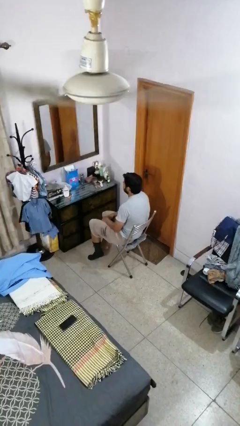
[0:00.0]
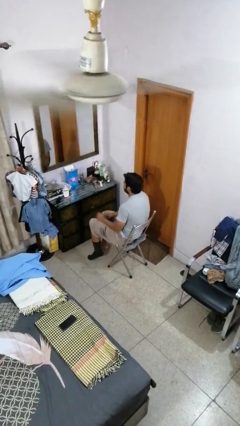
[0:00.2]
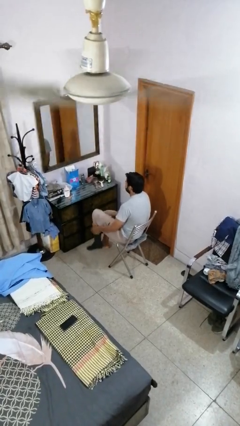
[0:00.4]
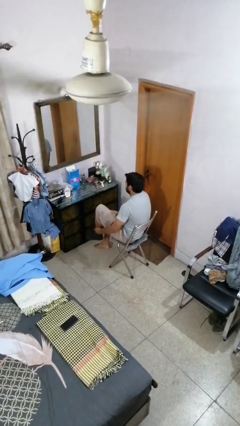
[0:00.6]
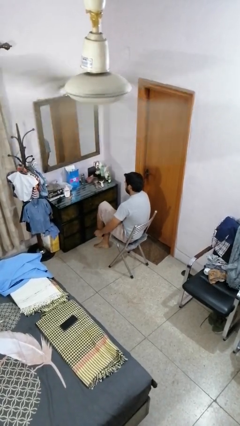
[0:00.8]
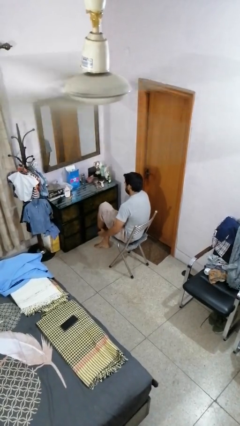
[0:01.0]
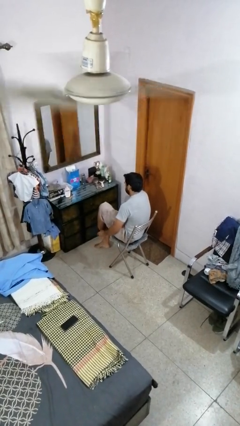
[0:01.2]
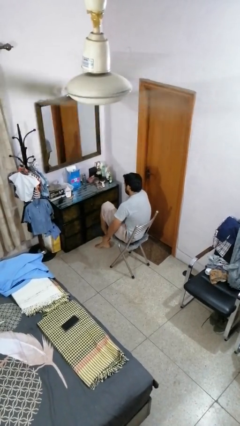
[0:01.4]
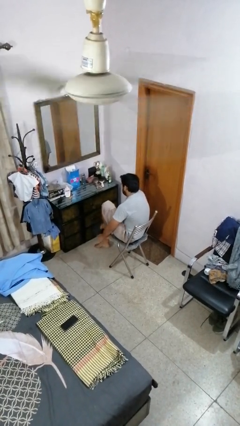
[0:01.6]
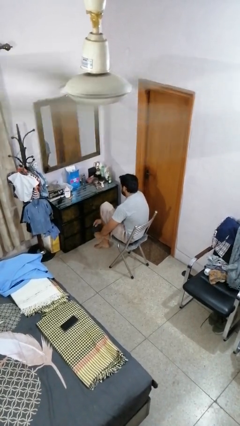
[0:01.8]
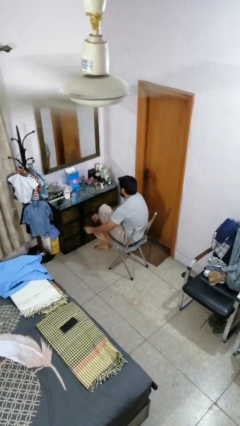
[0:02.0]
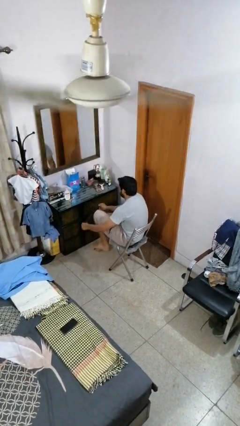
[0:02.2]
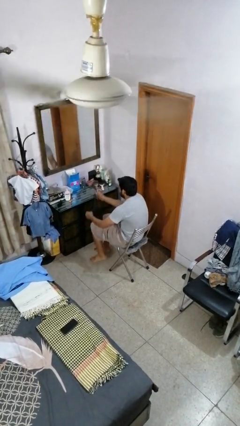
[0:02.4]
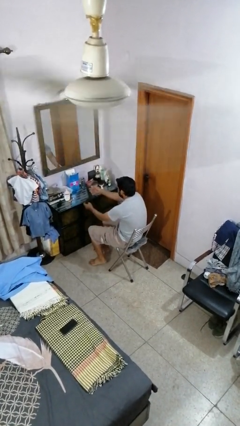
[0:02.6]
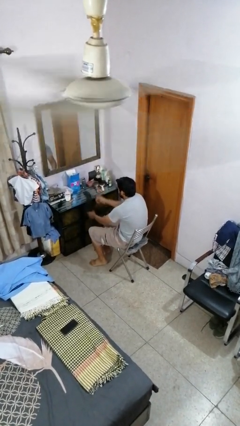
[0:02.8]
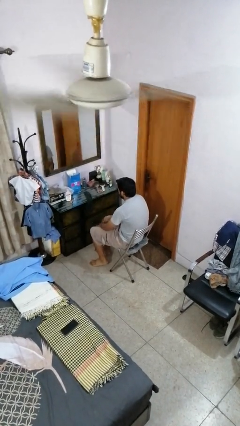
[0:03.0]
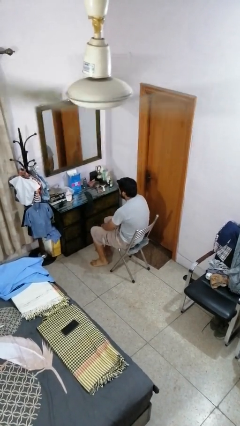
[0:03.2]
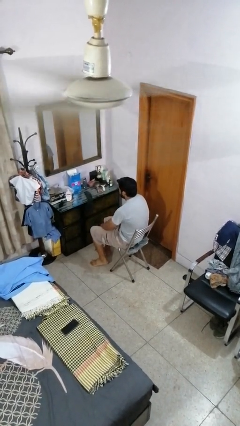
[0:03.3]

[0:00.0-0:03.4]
person takes off socks

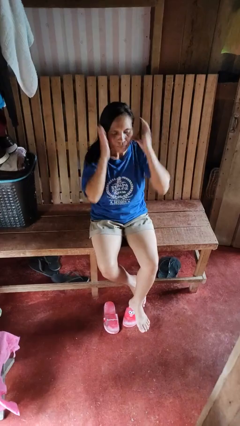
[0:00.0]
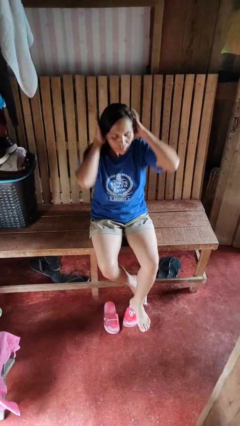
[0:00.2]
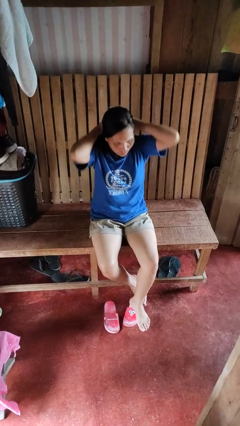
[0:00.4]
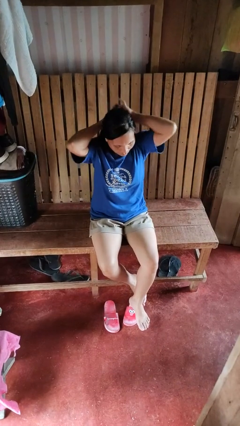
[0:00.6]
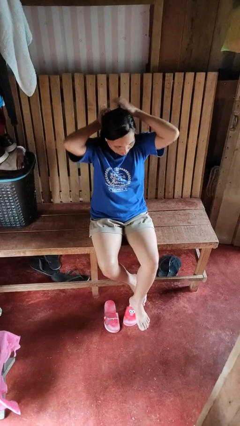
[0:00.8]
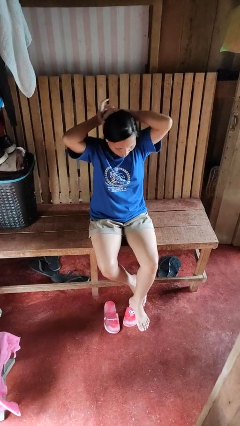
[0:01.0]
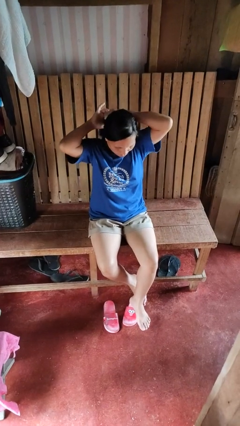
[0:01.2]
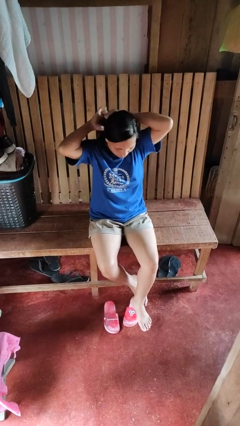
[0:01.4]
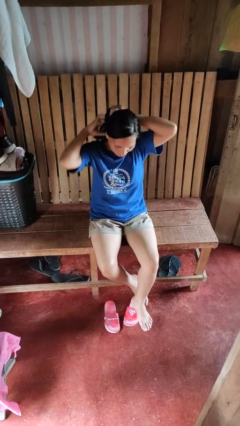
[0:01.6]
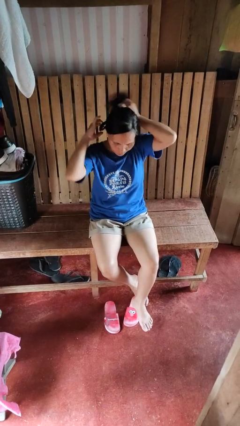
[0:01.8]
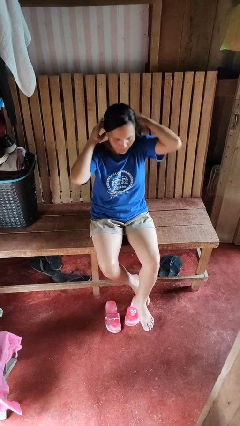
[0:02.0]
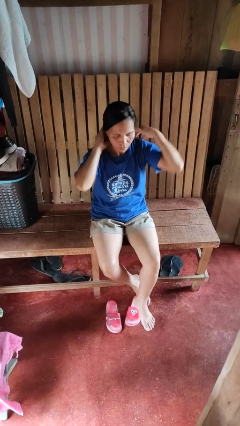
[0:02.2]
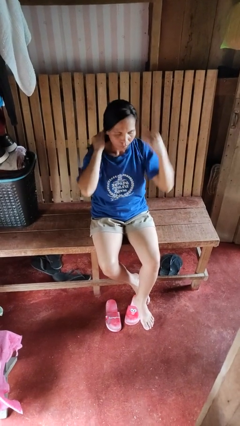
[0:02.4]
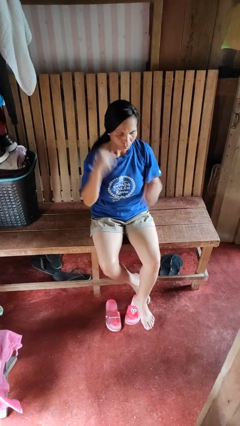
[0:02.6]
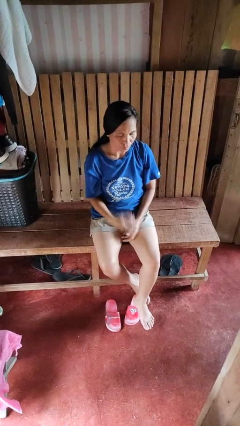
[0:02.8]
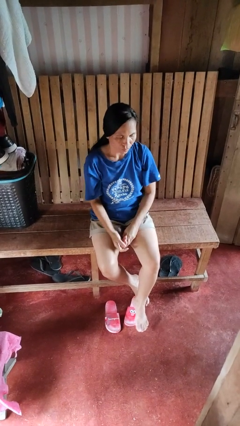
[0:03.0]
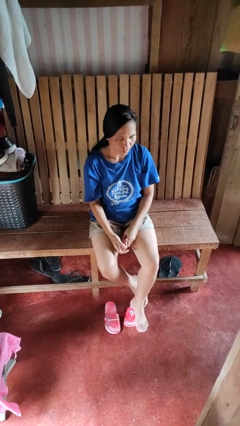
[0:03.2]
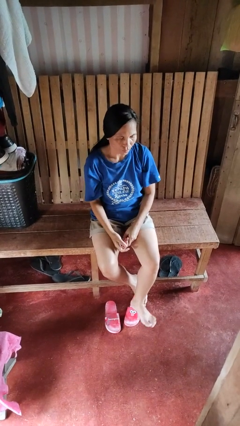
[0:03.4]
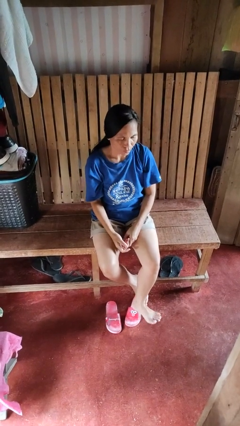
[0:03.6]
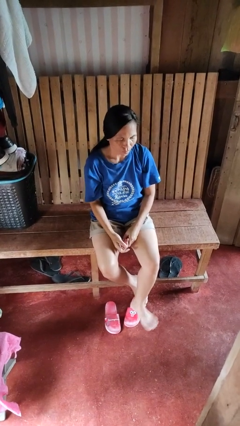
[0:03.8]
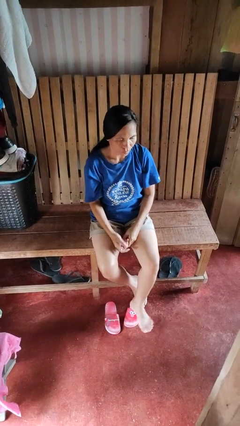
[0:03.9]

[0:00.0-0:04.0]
person puts hair in ponytail

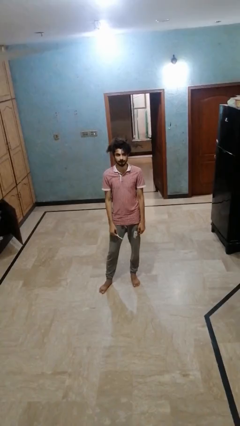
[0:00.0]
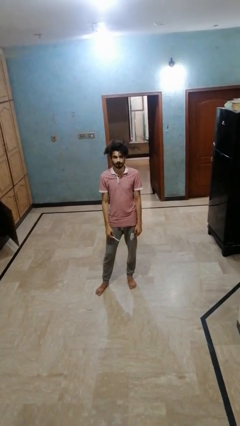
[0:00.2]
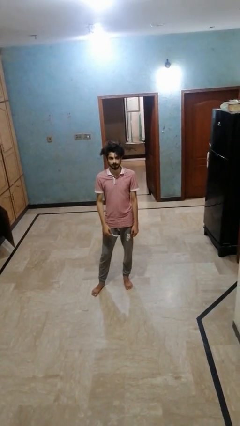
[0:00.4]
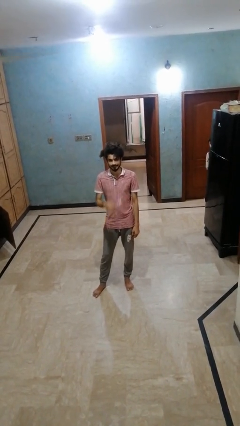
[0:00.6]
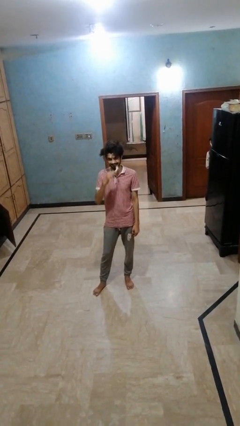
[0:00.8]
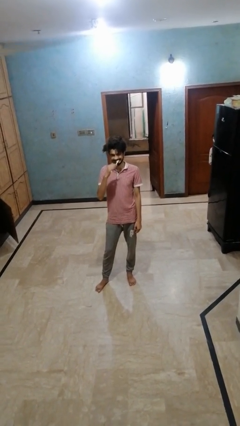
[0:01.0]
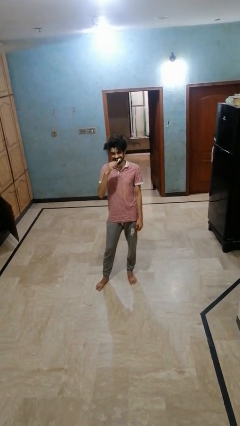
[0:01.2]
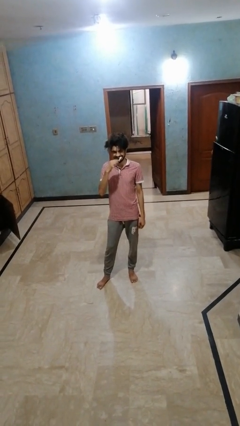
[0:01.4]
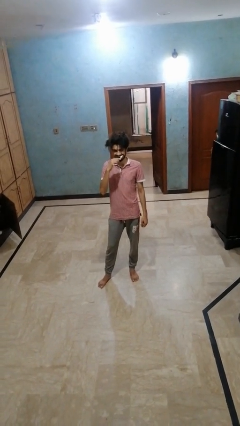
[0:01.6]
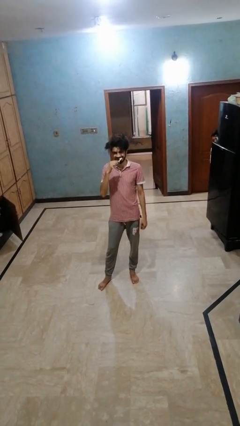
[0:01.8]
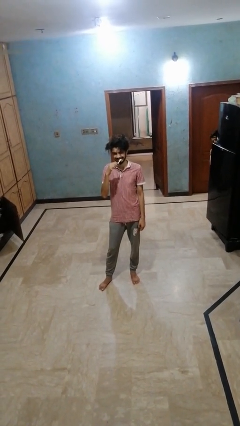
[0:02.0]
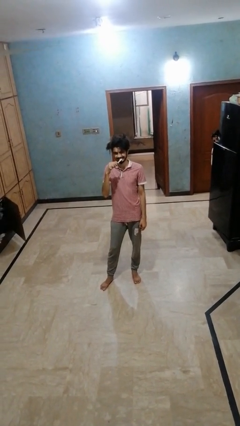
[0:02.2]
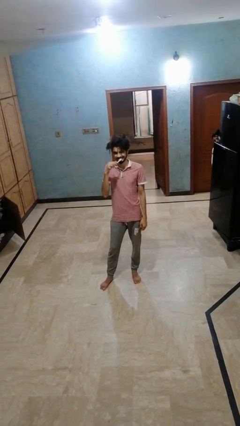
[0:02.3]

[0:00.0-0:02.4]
person brushes teeth

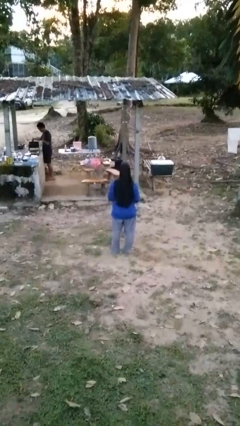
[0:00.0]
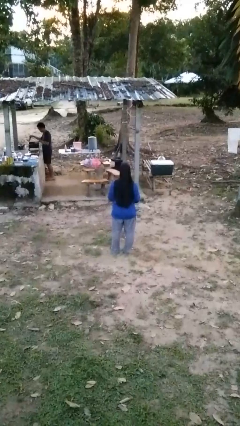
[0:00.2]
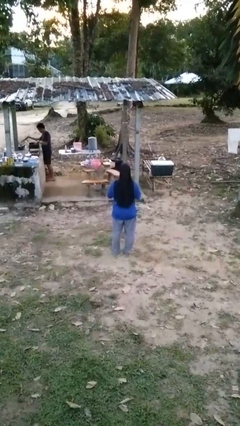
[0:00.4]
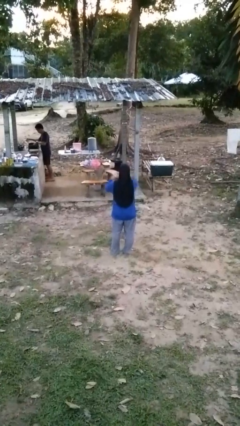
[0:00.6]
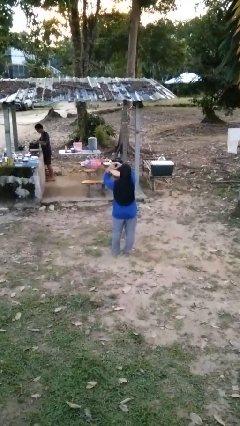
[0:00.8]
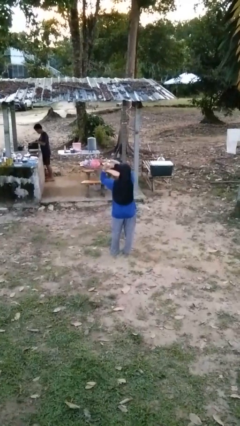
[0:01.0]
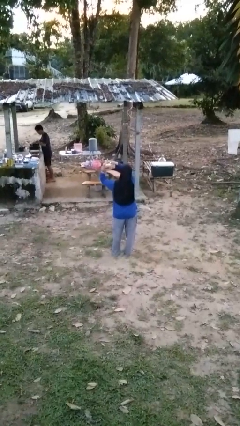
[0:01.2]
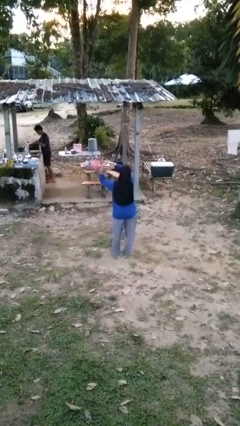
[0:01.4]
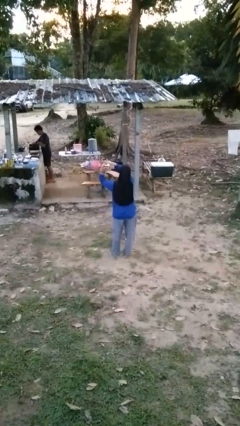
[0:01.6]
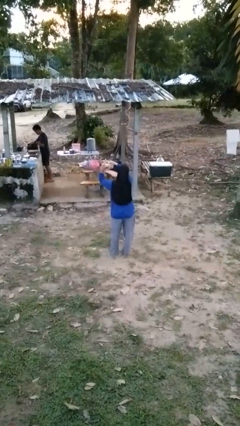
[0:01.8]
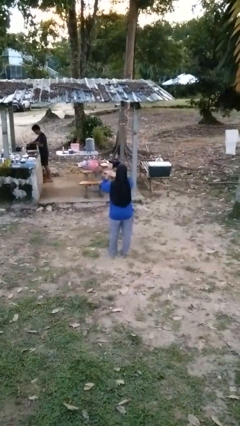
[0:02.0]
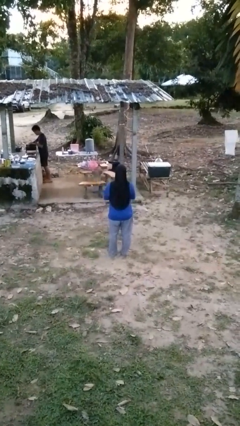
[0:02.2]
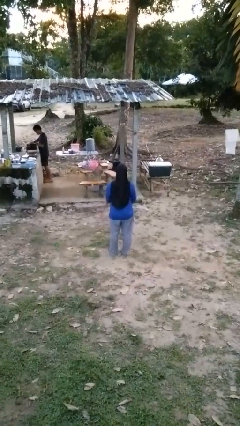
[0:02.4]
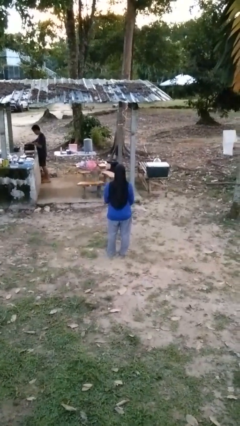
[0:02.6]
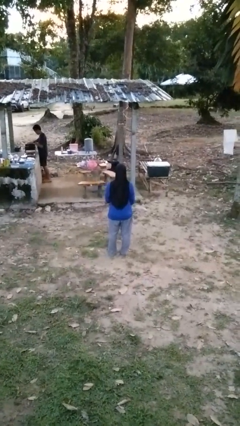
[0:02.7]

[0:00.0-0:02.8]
person gestures heart

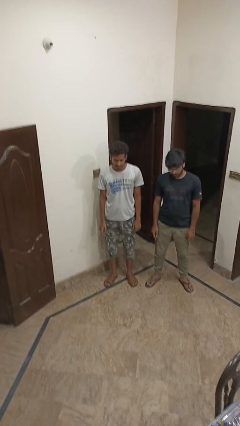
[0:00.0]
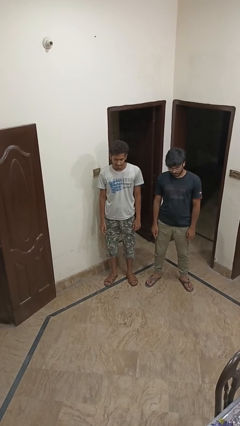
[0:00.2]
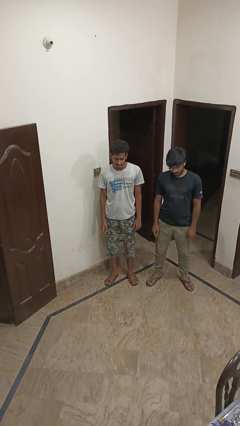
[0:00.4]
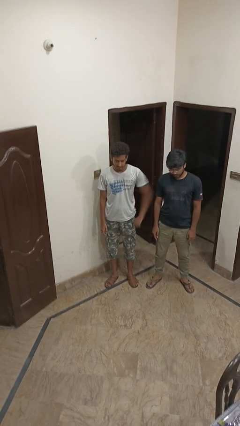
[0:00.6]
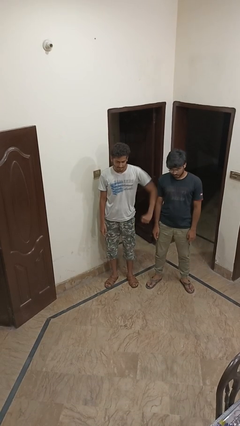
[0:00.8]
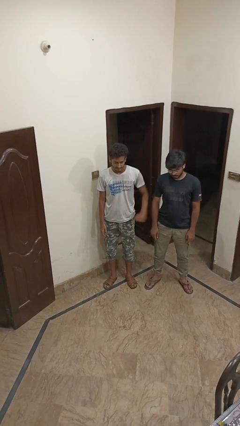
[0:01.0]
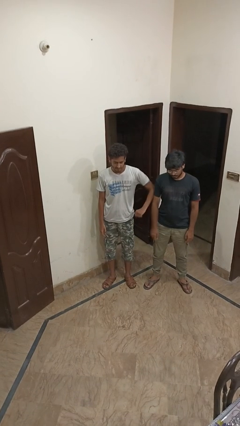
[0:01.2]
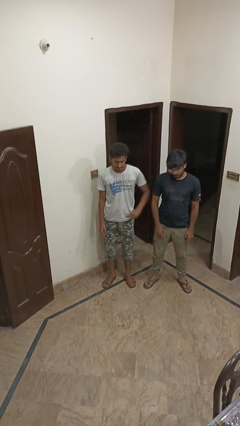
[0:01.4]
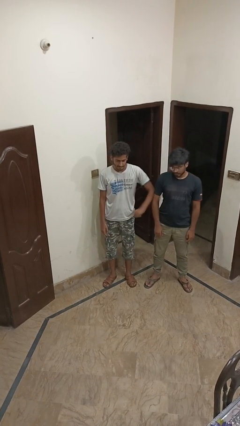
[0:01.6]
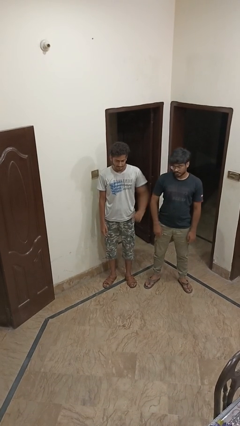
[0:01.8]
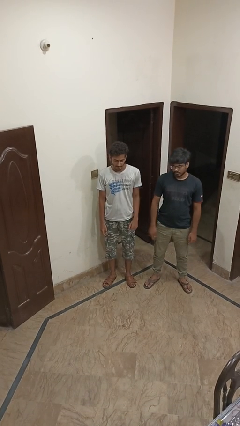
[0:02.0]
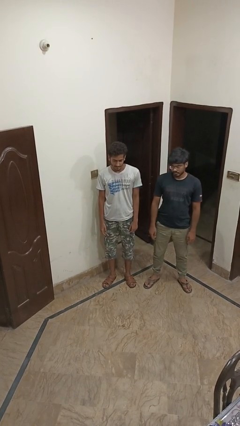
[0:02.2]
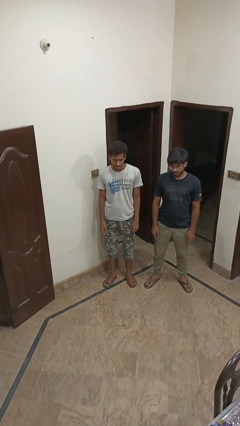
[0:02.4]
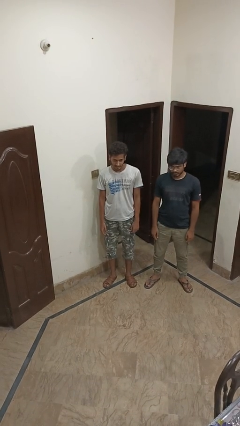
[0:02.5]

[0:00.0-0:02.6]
person nudges person with elbow

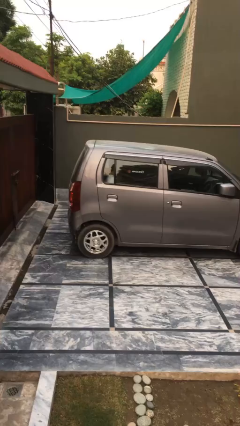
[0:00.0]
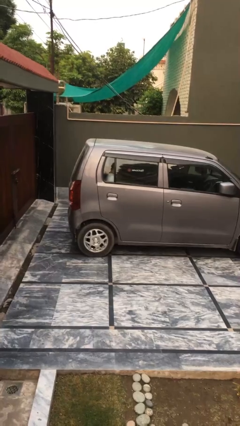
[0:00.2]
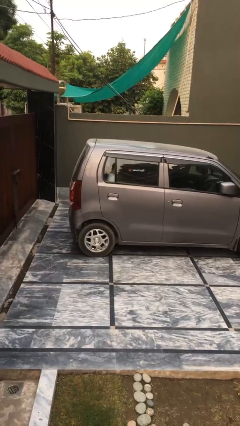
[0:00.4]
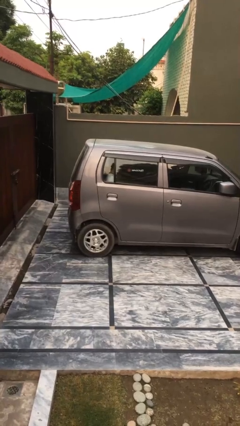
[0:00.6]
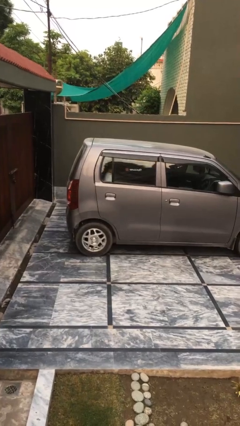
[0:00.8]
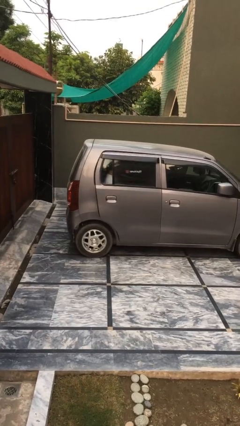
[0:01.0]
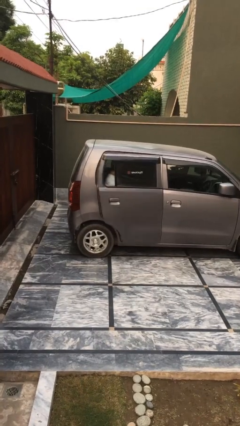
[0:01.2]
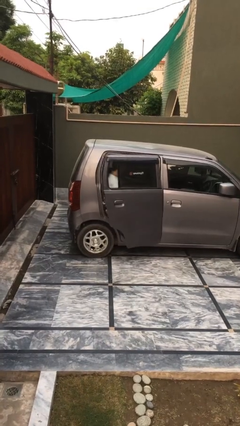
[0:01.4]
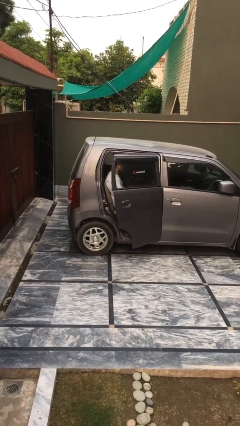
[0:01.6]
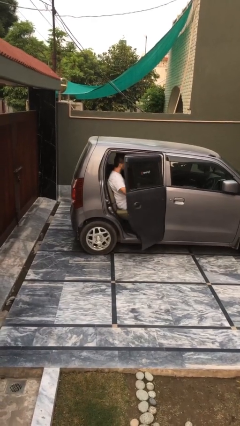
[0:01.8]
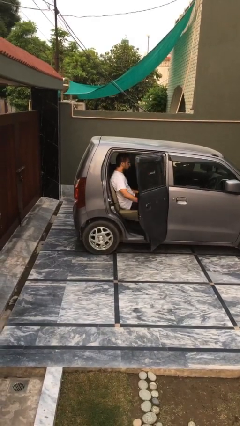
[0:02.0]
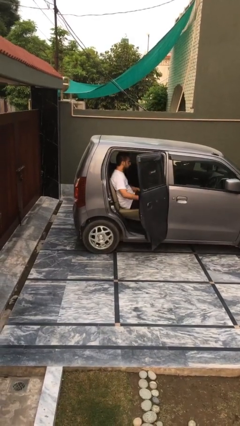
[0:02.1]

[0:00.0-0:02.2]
person opens car door
